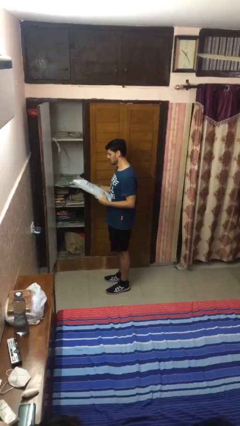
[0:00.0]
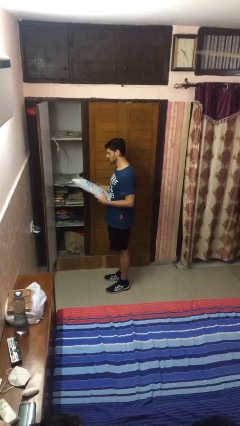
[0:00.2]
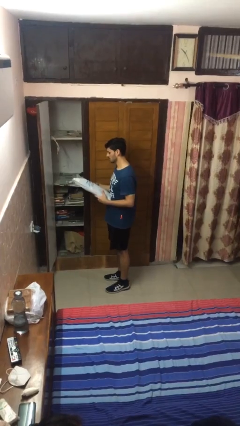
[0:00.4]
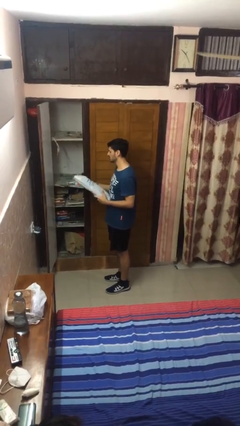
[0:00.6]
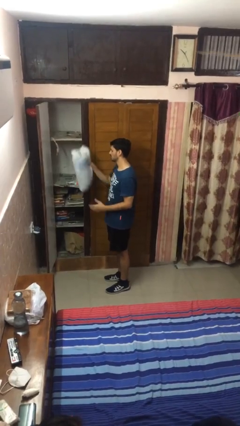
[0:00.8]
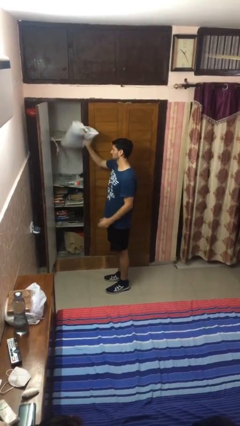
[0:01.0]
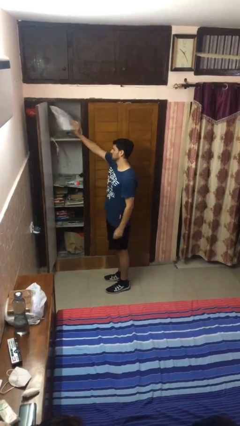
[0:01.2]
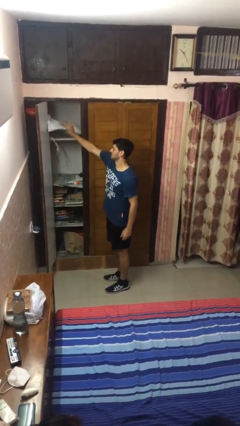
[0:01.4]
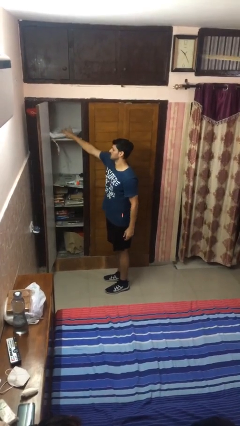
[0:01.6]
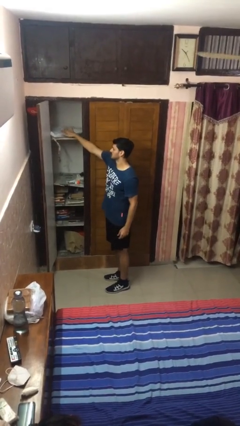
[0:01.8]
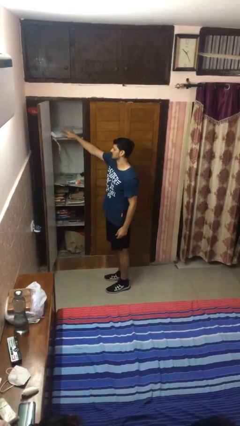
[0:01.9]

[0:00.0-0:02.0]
person puts down object on shelf

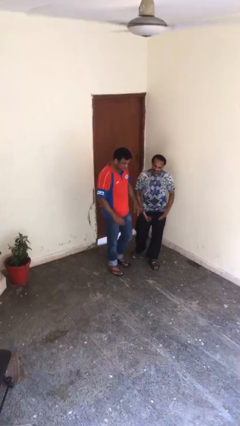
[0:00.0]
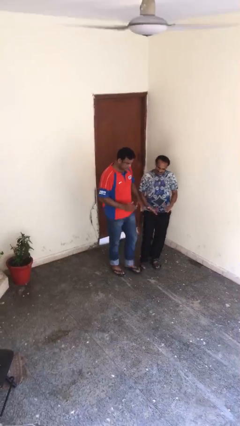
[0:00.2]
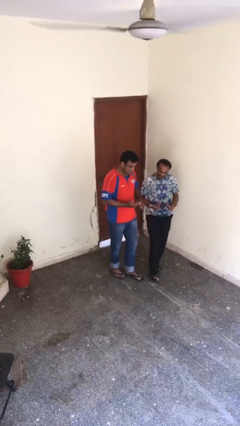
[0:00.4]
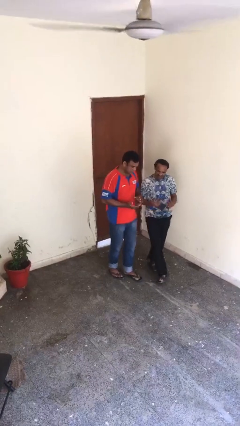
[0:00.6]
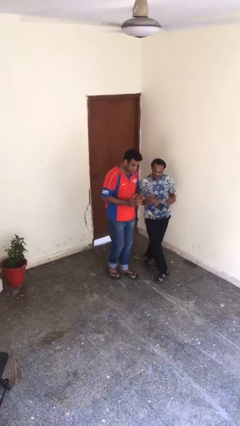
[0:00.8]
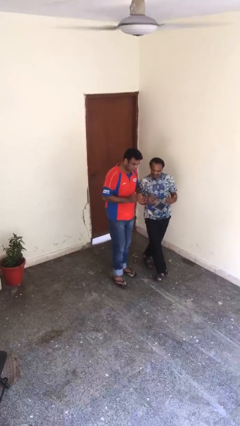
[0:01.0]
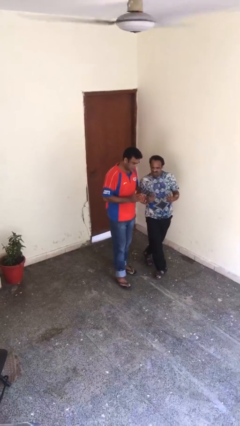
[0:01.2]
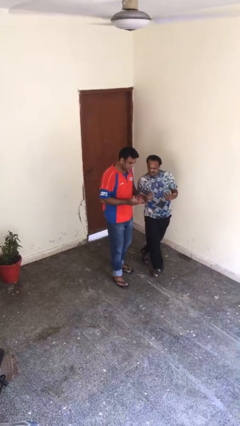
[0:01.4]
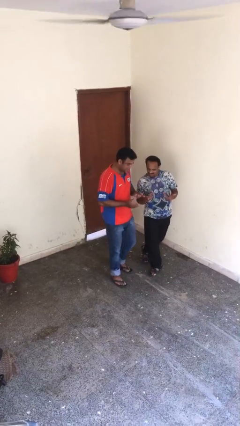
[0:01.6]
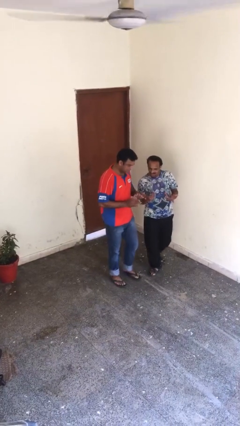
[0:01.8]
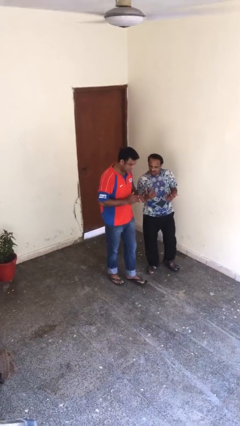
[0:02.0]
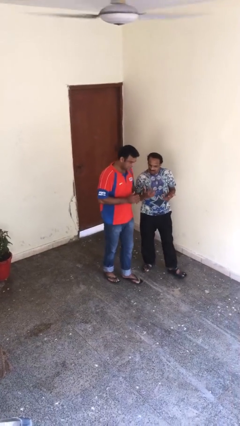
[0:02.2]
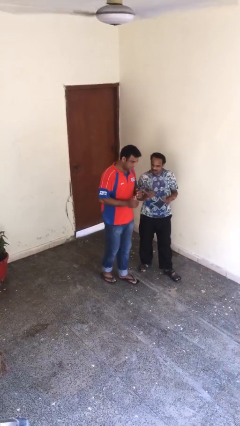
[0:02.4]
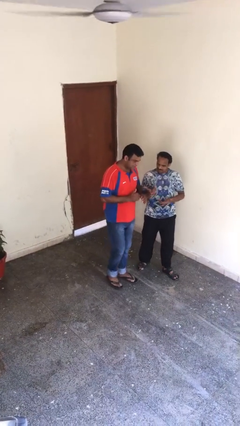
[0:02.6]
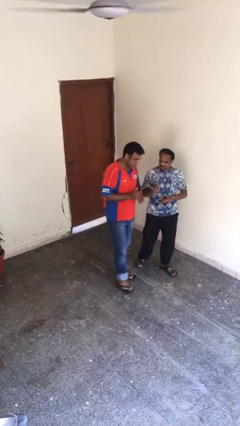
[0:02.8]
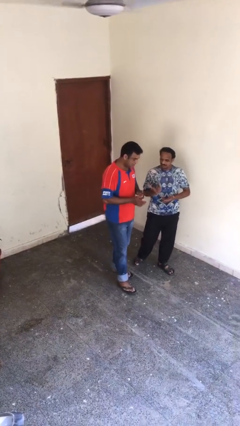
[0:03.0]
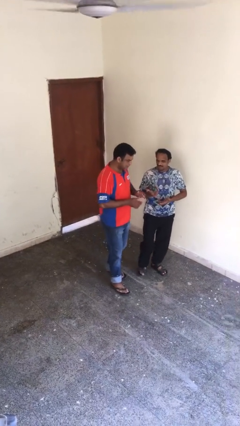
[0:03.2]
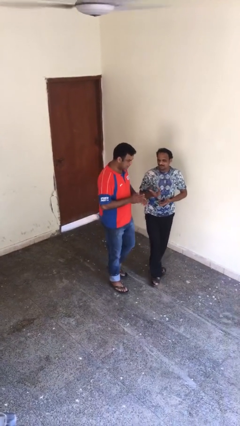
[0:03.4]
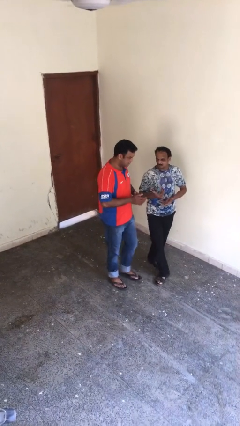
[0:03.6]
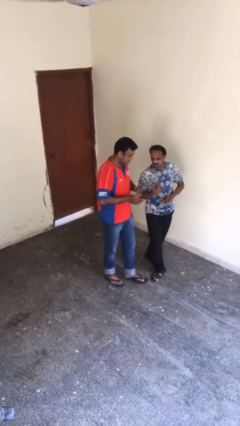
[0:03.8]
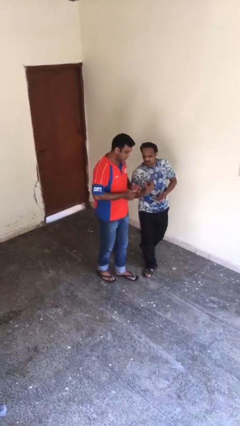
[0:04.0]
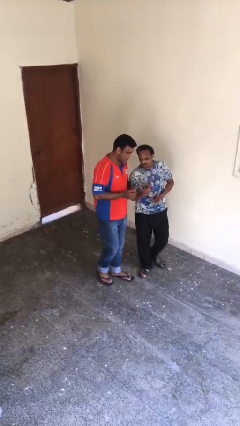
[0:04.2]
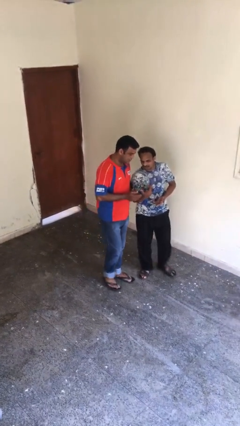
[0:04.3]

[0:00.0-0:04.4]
person talks to person

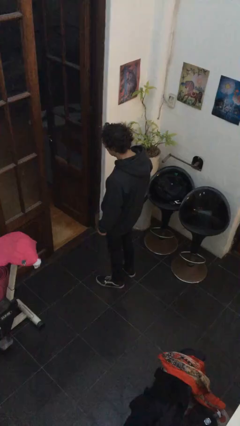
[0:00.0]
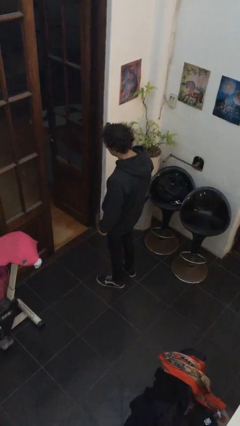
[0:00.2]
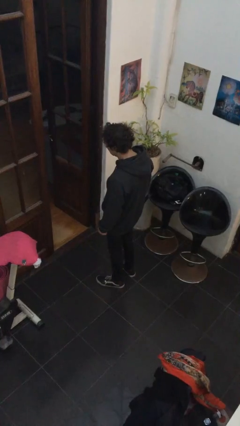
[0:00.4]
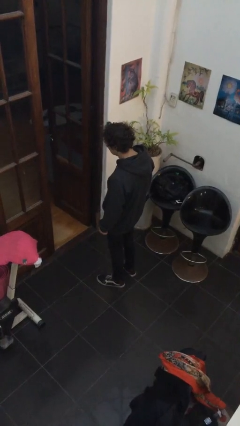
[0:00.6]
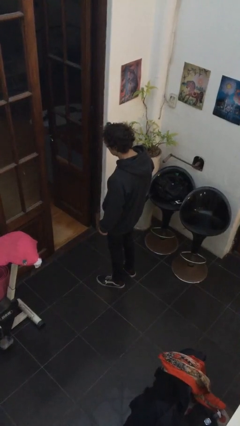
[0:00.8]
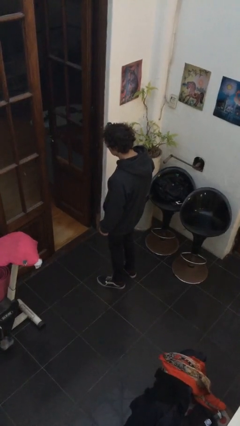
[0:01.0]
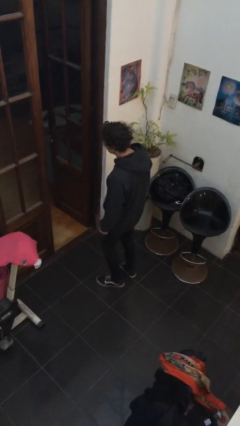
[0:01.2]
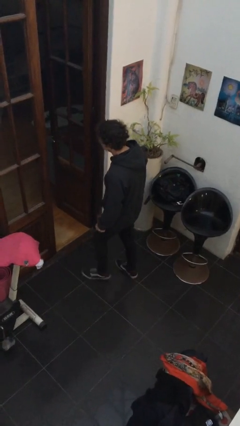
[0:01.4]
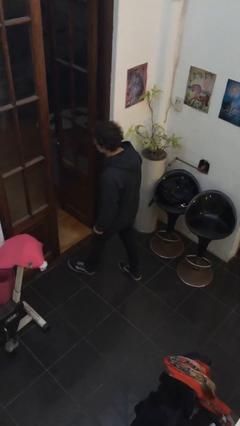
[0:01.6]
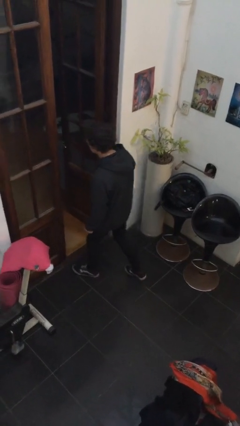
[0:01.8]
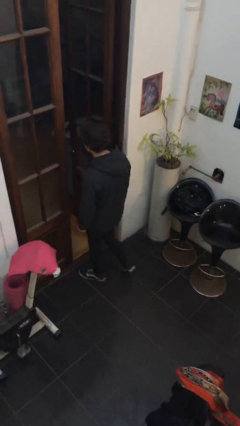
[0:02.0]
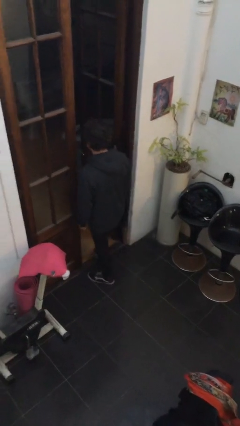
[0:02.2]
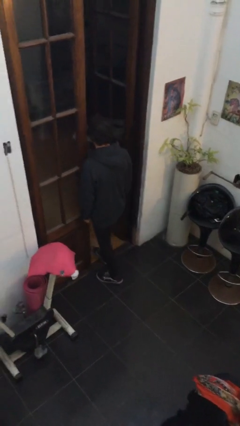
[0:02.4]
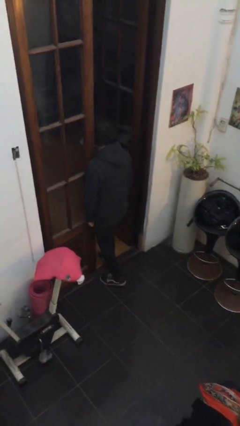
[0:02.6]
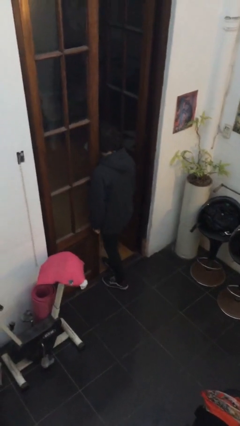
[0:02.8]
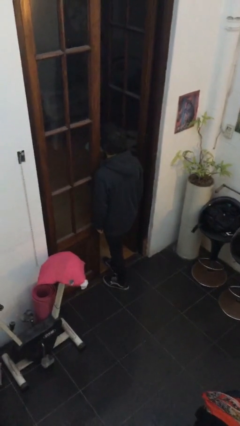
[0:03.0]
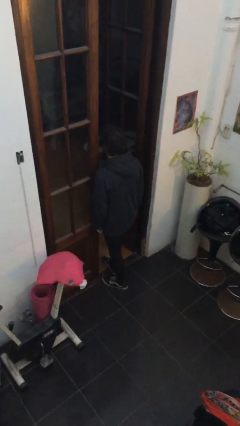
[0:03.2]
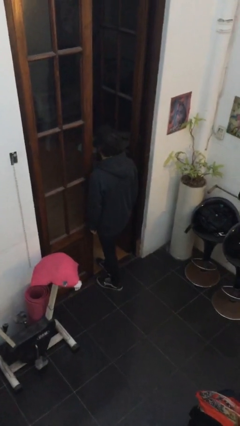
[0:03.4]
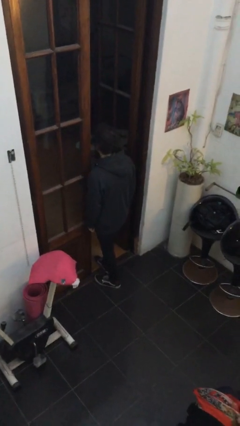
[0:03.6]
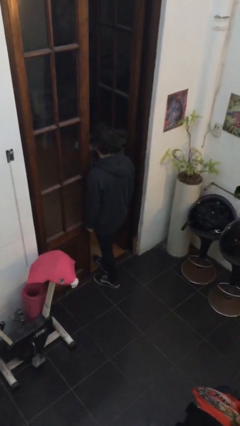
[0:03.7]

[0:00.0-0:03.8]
person bumps into wall

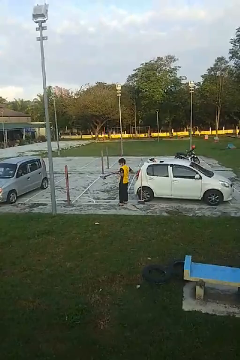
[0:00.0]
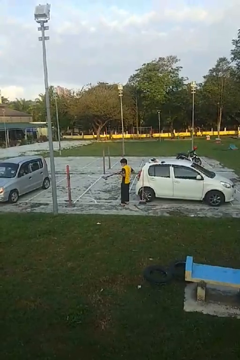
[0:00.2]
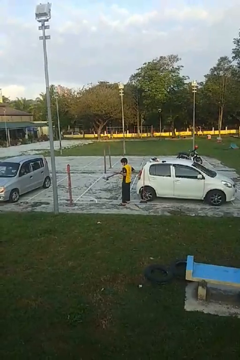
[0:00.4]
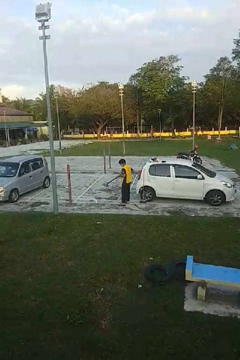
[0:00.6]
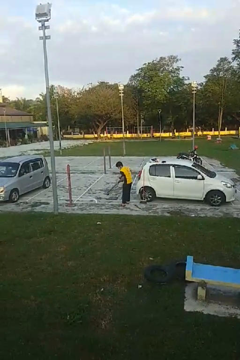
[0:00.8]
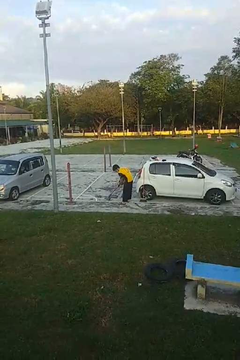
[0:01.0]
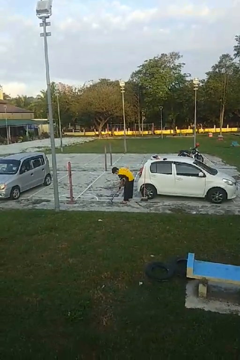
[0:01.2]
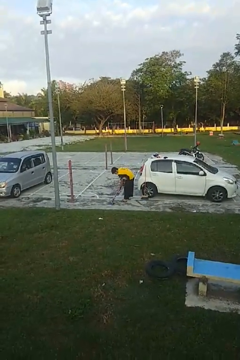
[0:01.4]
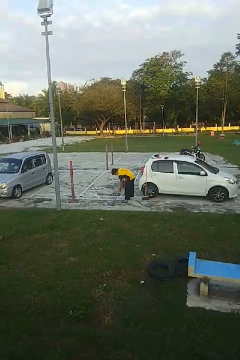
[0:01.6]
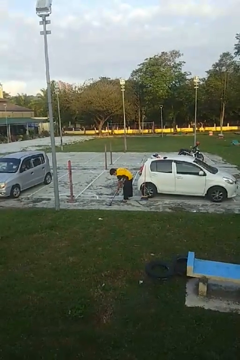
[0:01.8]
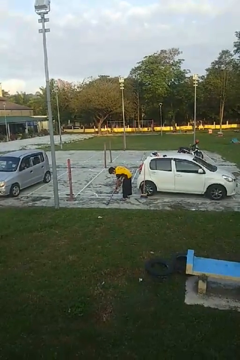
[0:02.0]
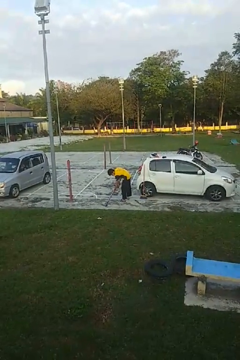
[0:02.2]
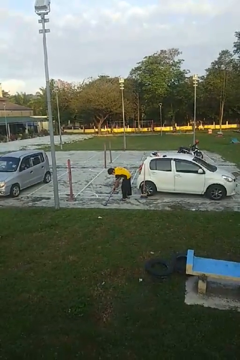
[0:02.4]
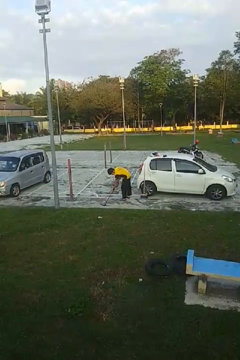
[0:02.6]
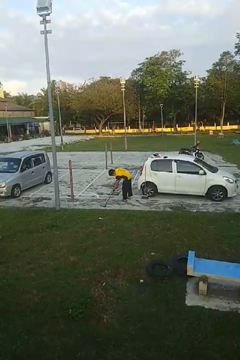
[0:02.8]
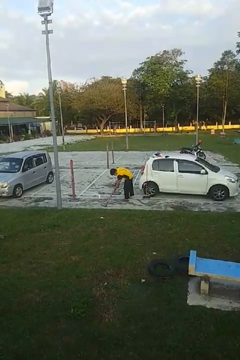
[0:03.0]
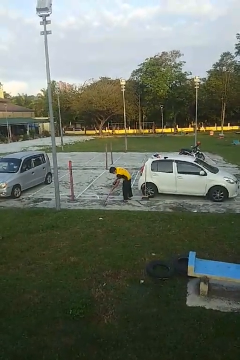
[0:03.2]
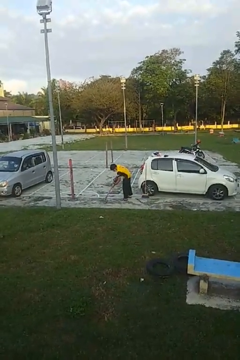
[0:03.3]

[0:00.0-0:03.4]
person vacuums carpet

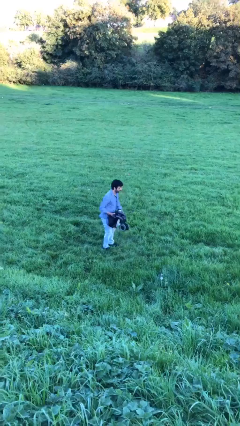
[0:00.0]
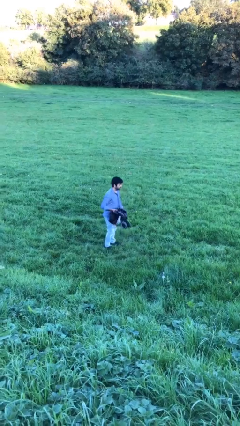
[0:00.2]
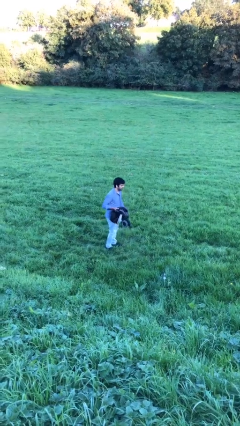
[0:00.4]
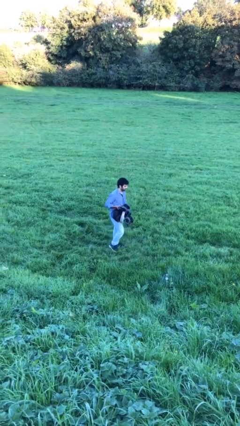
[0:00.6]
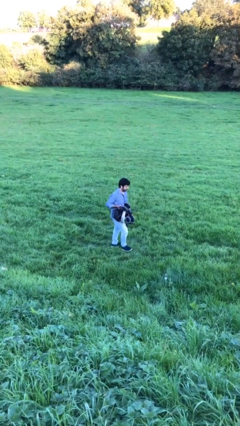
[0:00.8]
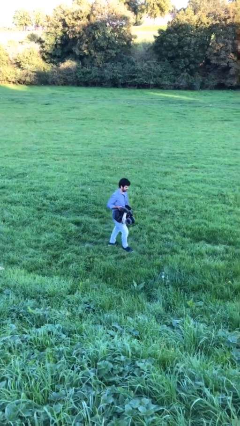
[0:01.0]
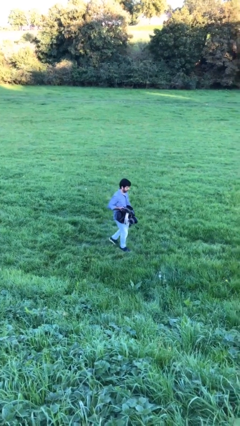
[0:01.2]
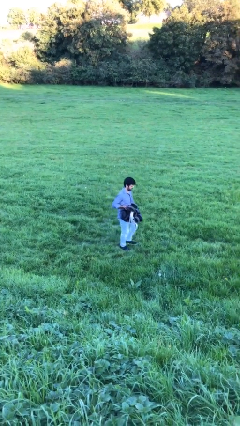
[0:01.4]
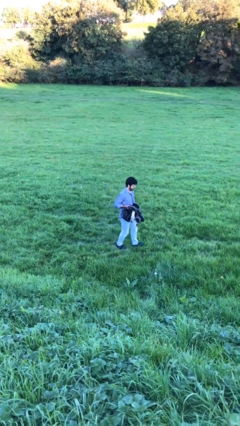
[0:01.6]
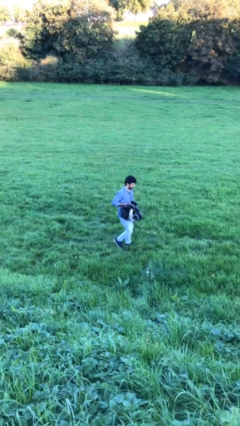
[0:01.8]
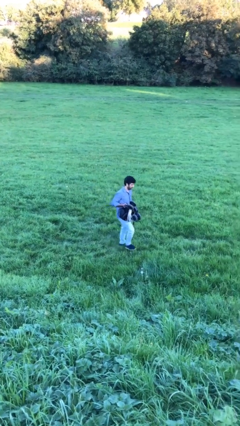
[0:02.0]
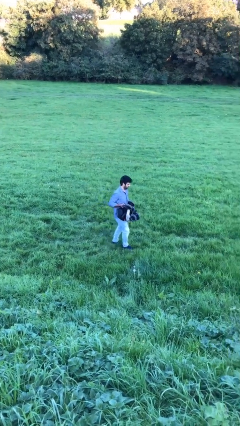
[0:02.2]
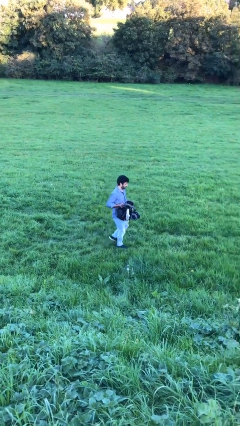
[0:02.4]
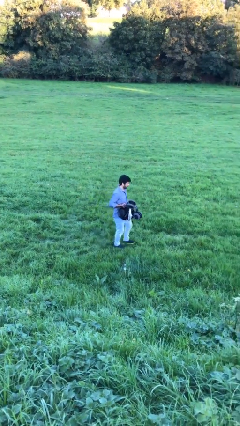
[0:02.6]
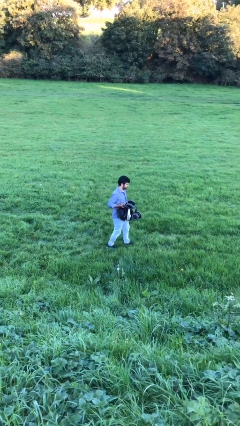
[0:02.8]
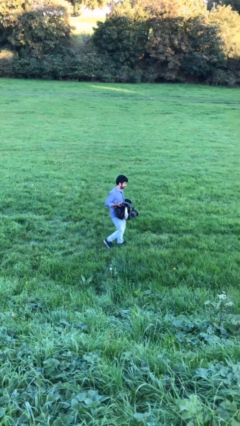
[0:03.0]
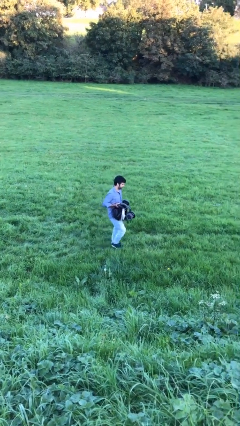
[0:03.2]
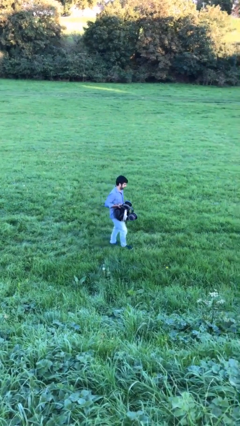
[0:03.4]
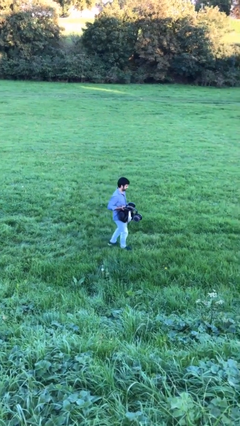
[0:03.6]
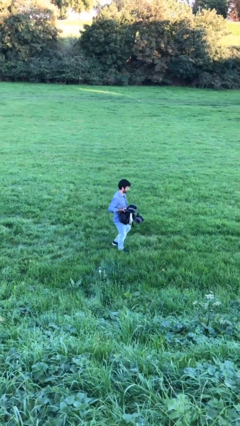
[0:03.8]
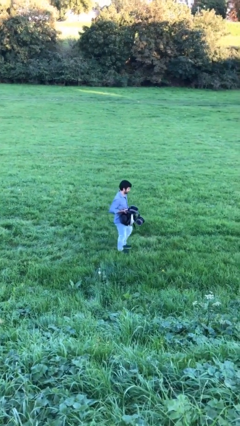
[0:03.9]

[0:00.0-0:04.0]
person carries heavy object
